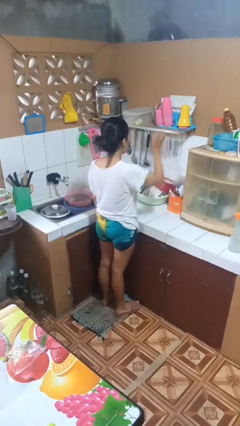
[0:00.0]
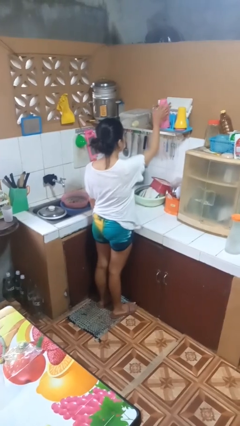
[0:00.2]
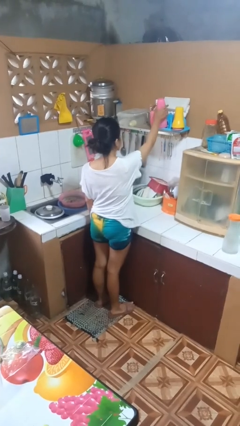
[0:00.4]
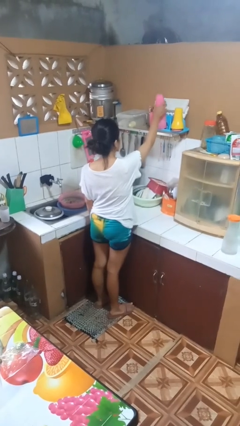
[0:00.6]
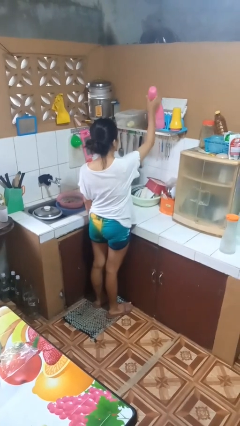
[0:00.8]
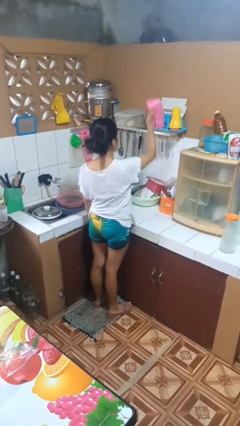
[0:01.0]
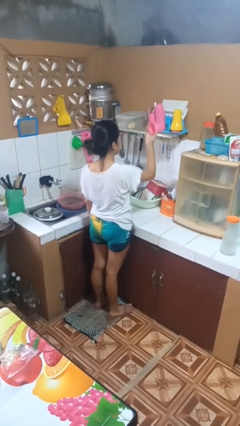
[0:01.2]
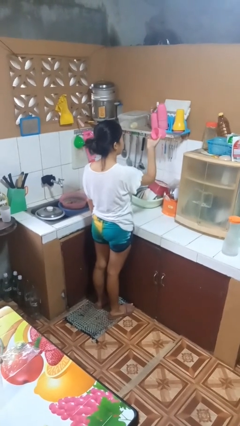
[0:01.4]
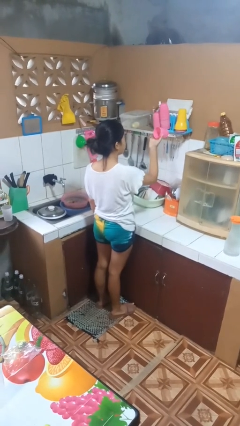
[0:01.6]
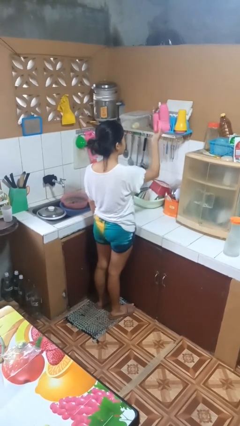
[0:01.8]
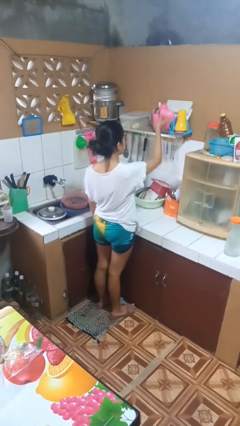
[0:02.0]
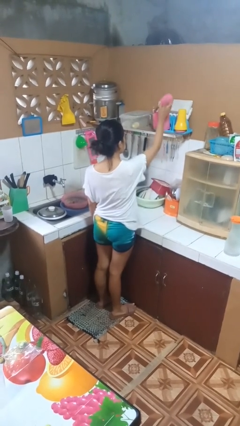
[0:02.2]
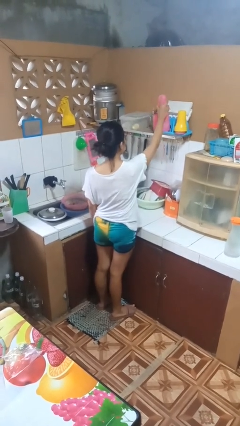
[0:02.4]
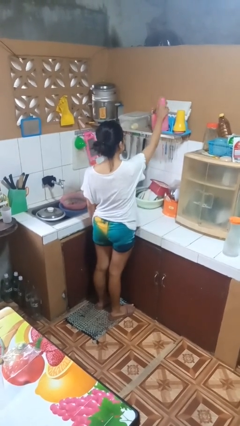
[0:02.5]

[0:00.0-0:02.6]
person picks up object from shelf

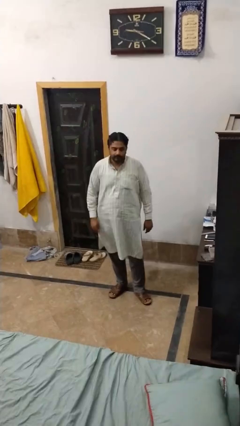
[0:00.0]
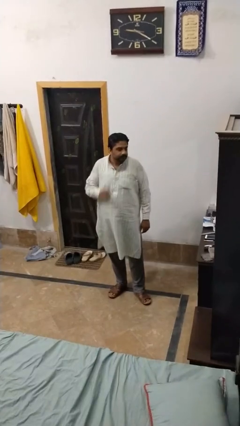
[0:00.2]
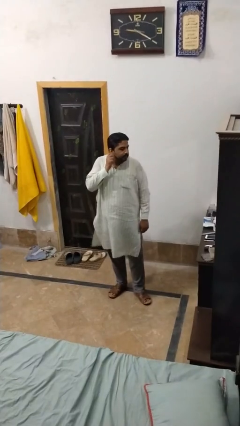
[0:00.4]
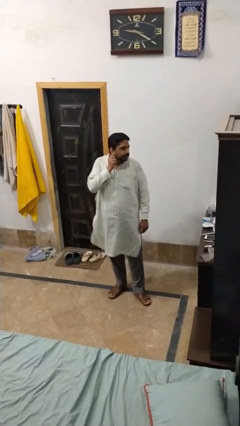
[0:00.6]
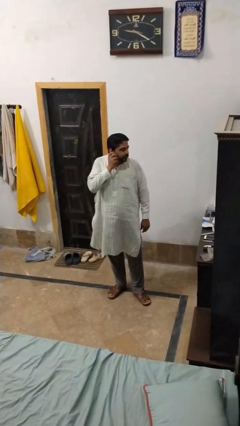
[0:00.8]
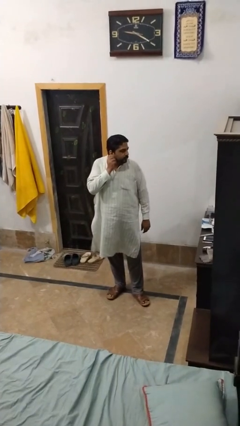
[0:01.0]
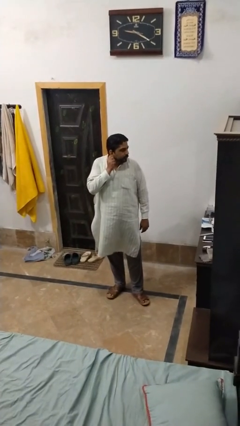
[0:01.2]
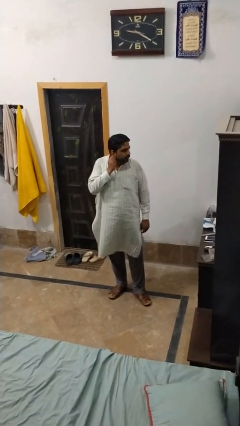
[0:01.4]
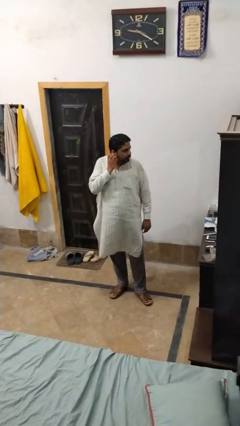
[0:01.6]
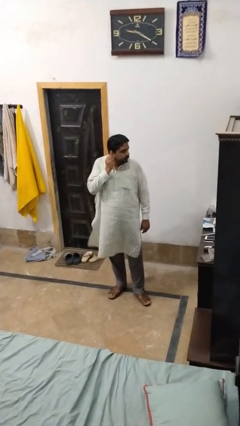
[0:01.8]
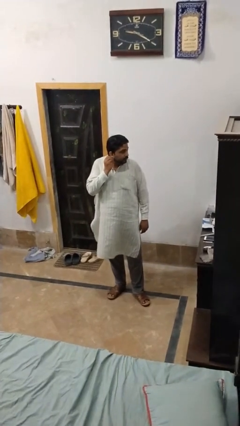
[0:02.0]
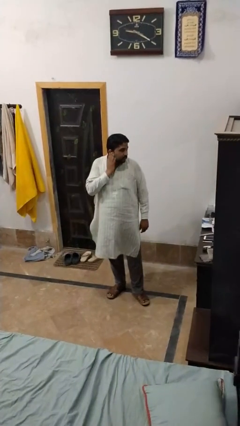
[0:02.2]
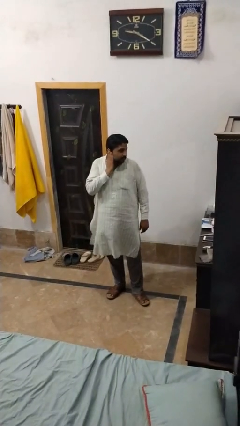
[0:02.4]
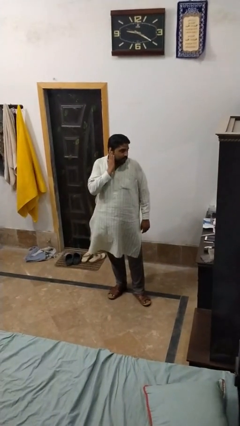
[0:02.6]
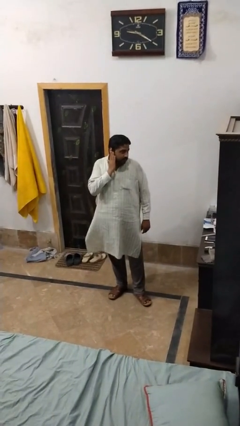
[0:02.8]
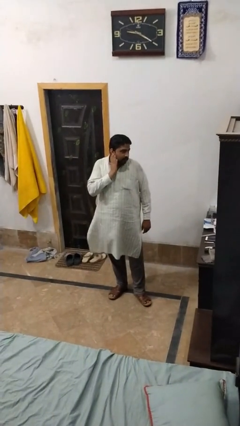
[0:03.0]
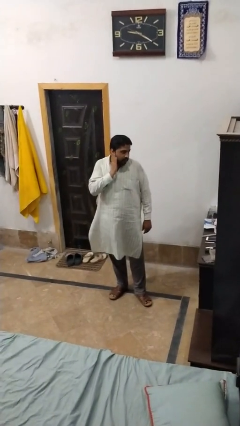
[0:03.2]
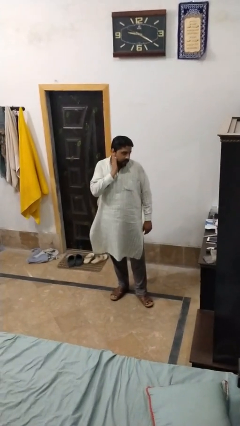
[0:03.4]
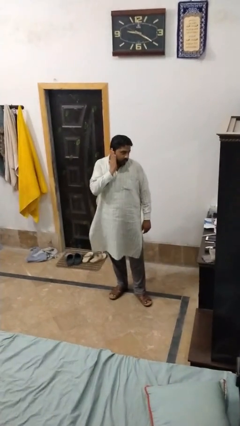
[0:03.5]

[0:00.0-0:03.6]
person touches earlobe

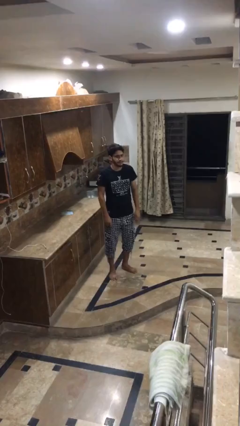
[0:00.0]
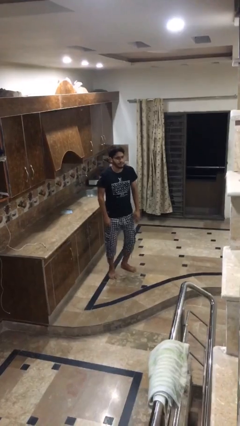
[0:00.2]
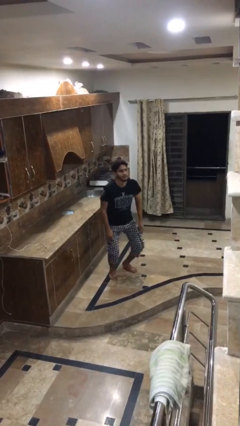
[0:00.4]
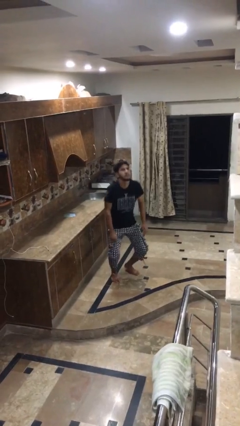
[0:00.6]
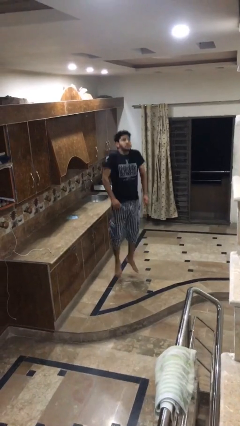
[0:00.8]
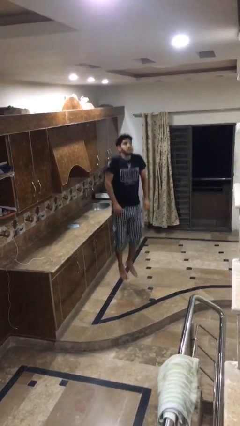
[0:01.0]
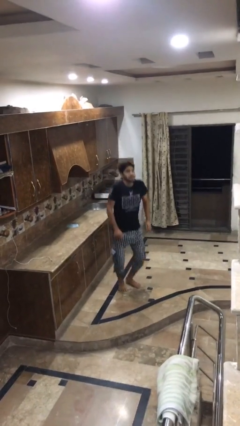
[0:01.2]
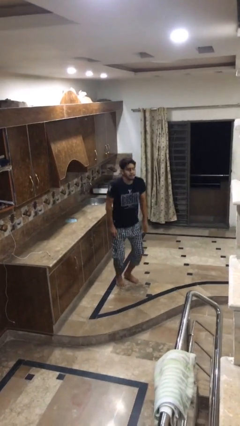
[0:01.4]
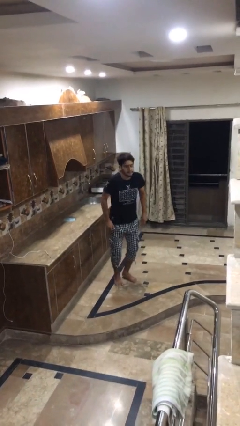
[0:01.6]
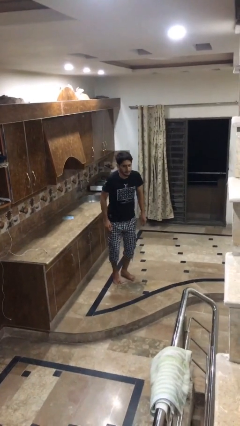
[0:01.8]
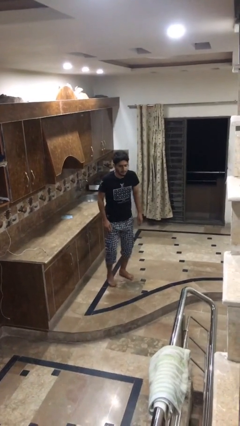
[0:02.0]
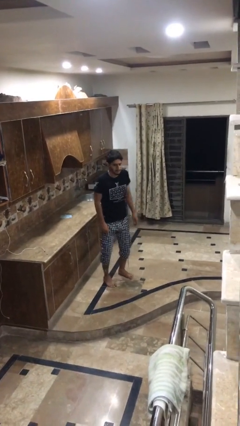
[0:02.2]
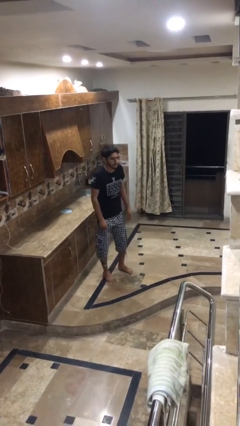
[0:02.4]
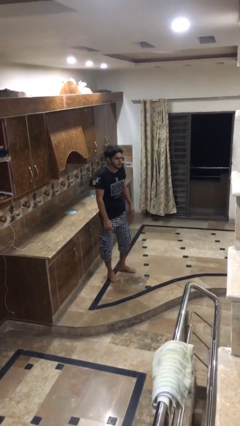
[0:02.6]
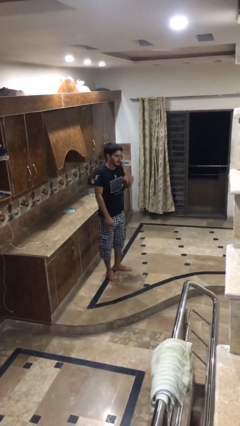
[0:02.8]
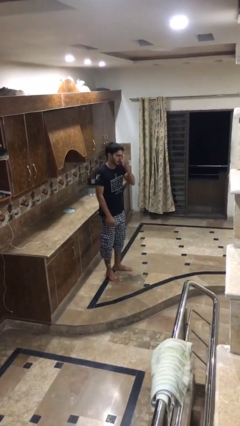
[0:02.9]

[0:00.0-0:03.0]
person jumps

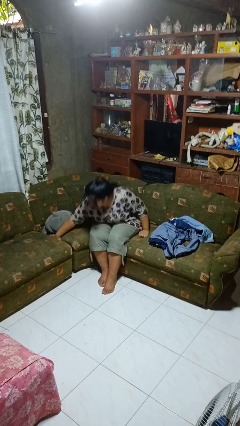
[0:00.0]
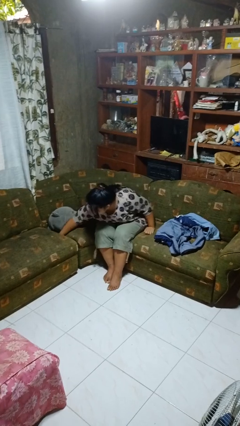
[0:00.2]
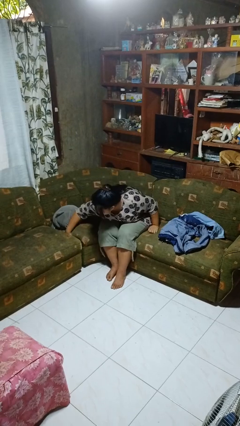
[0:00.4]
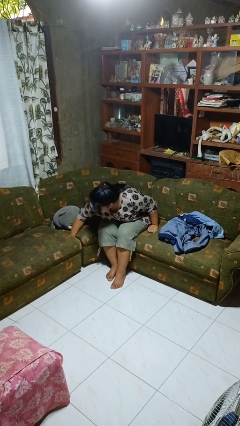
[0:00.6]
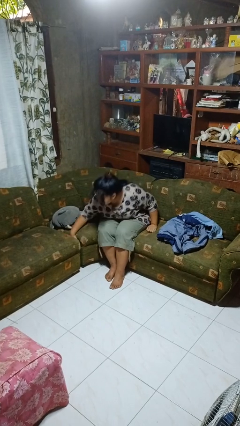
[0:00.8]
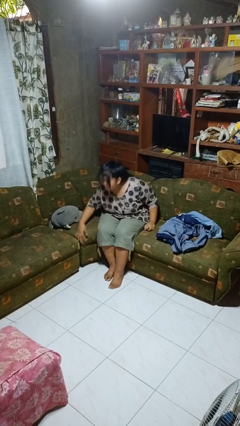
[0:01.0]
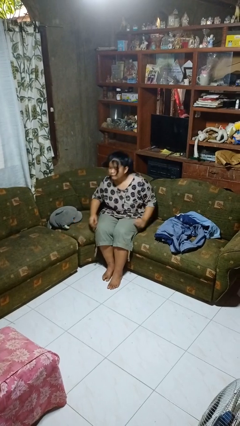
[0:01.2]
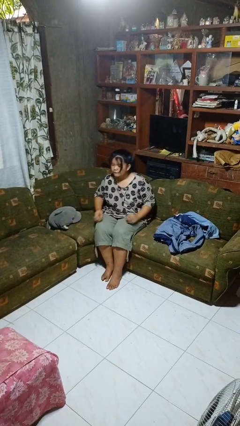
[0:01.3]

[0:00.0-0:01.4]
person searches in couch

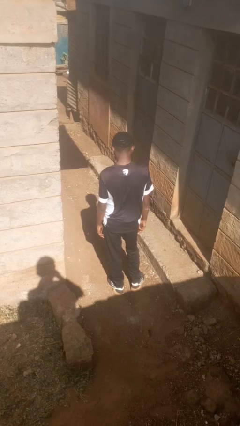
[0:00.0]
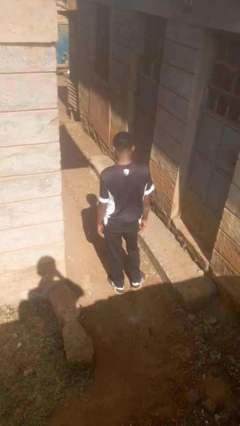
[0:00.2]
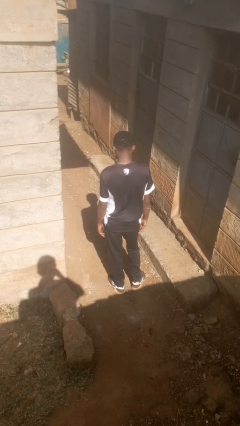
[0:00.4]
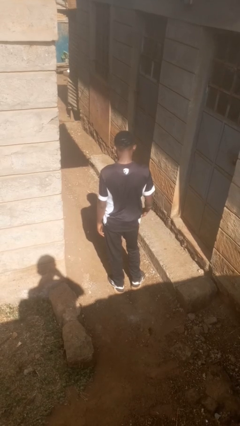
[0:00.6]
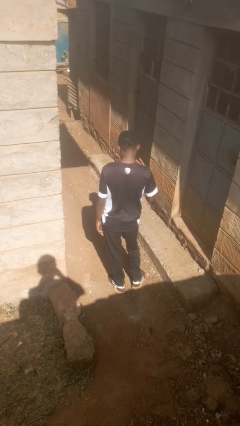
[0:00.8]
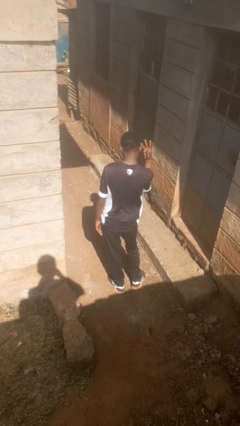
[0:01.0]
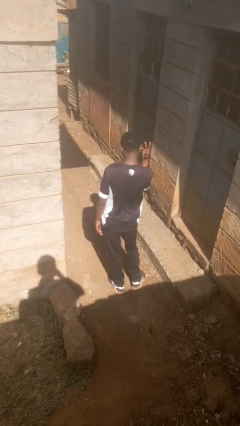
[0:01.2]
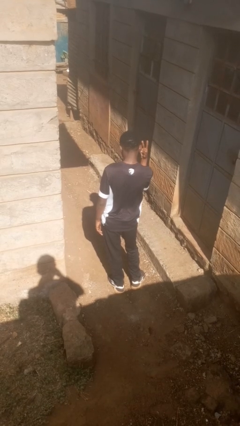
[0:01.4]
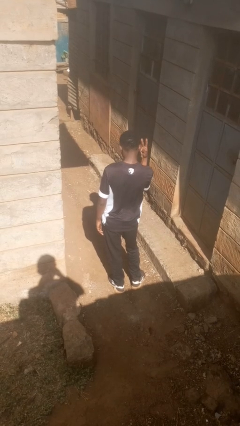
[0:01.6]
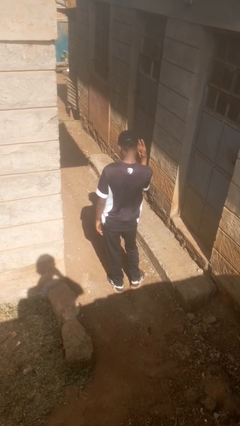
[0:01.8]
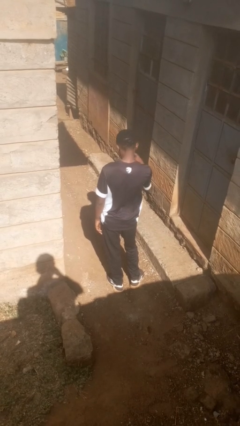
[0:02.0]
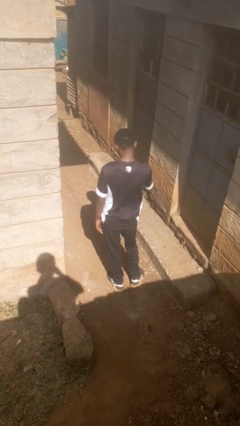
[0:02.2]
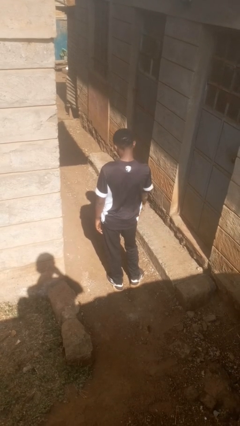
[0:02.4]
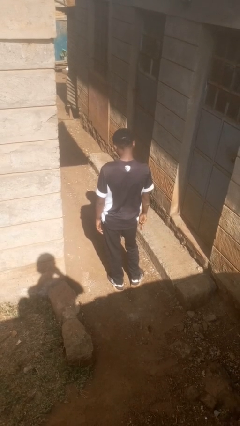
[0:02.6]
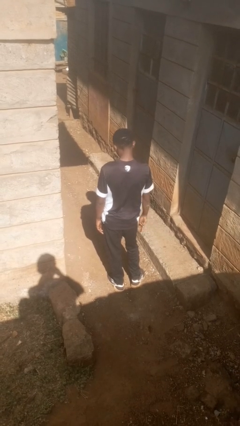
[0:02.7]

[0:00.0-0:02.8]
person gestures number three

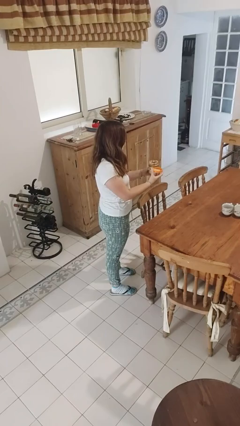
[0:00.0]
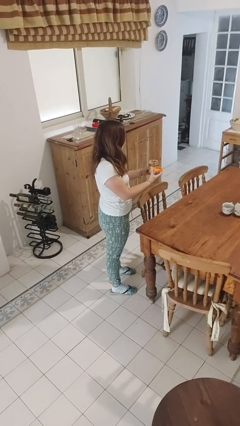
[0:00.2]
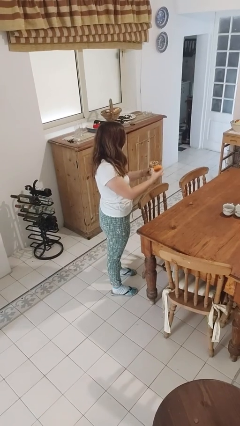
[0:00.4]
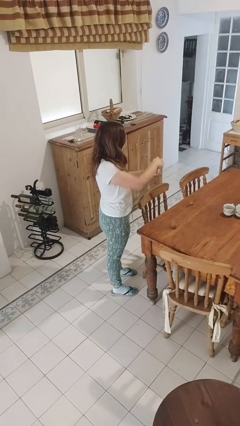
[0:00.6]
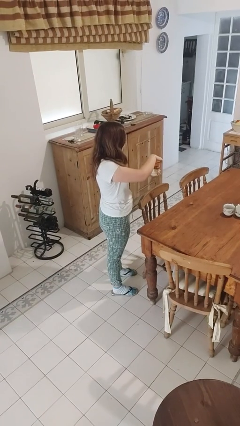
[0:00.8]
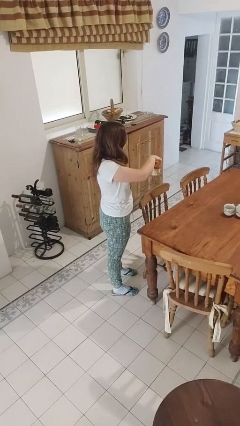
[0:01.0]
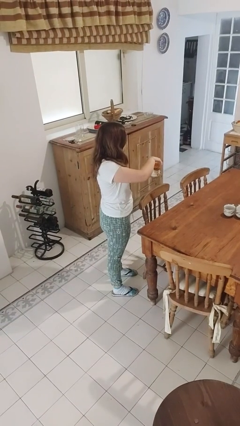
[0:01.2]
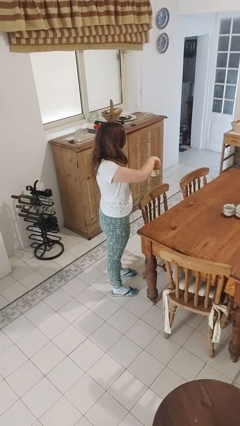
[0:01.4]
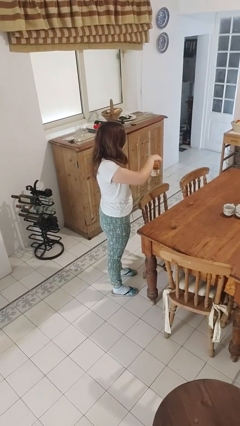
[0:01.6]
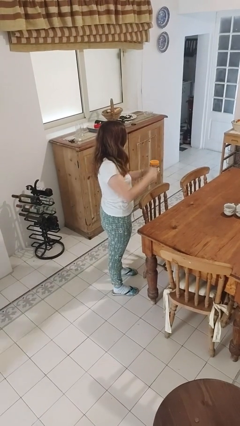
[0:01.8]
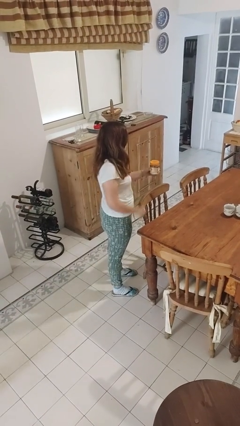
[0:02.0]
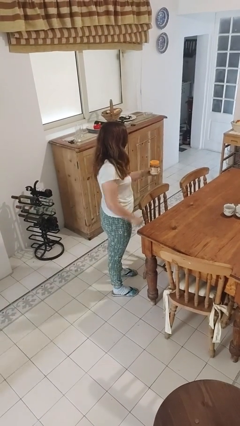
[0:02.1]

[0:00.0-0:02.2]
person closes jar

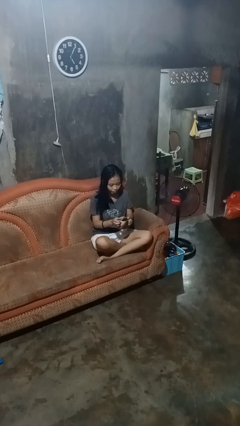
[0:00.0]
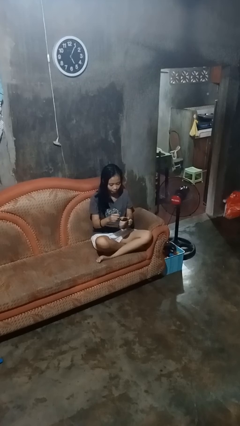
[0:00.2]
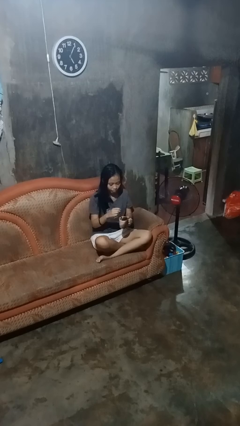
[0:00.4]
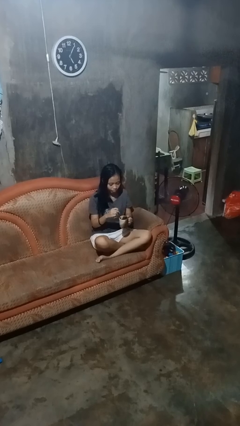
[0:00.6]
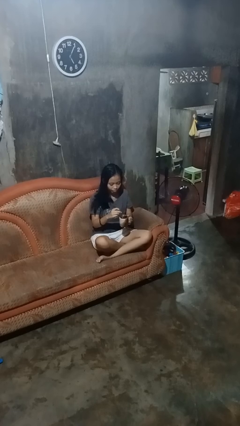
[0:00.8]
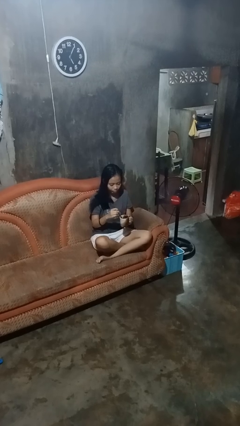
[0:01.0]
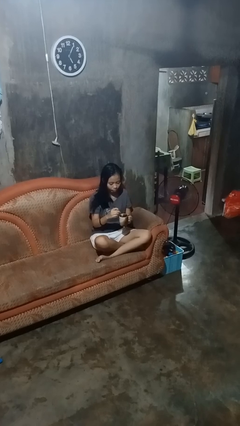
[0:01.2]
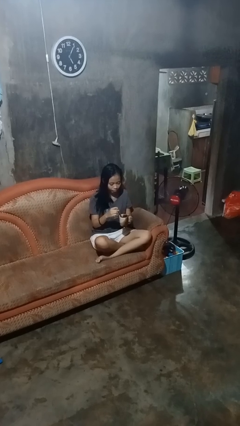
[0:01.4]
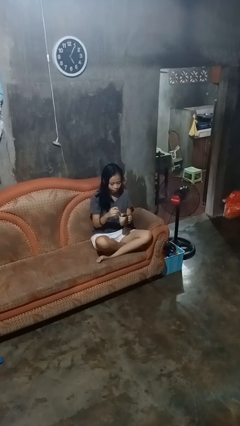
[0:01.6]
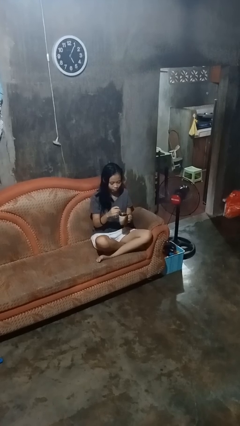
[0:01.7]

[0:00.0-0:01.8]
person stirs mug
